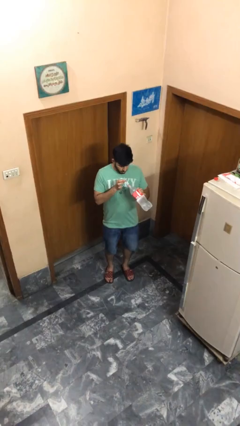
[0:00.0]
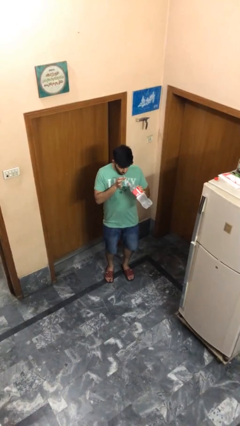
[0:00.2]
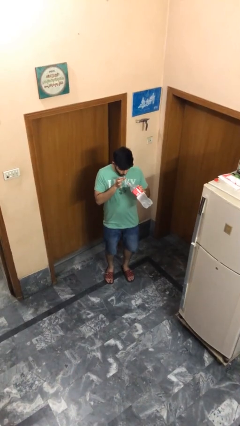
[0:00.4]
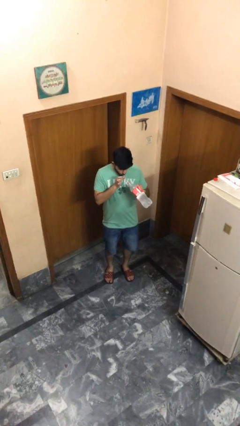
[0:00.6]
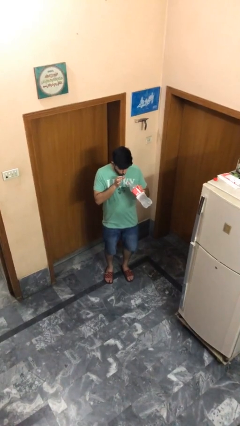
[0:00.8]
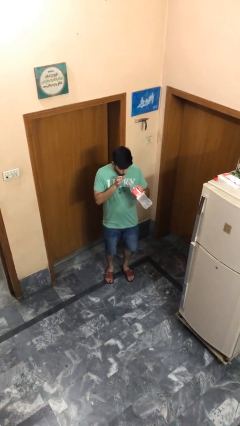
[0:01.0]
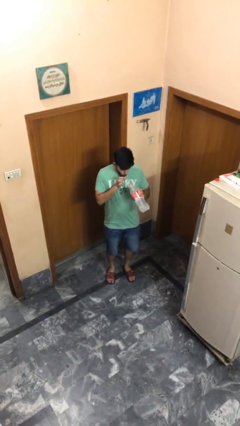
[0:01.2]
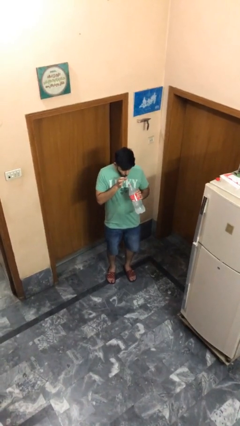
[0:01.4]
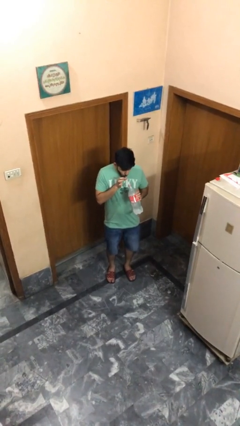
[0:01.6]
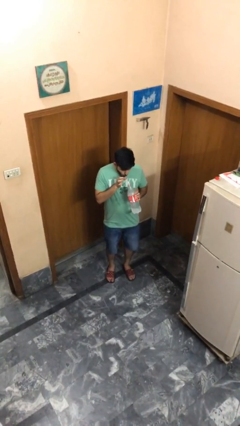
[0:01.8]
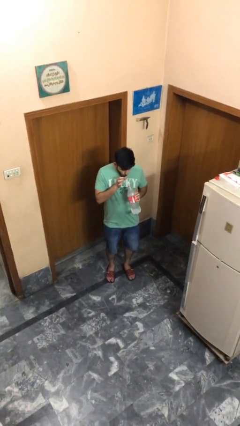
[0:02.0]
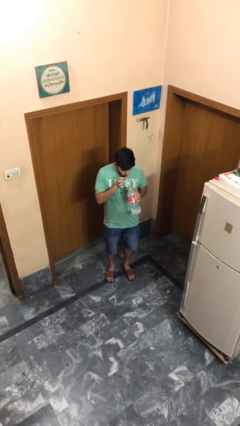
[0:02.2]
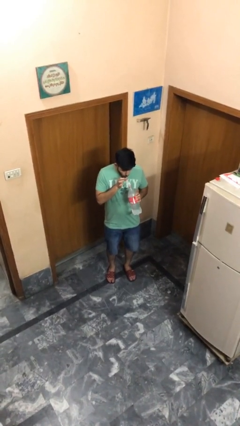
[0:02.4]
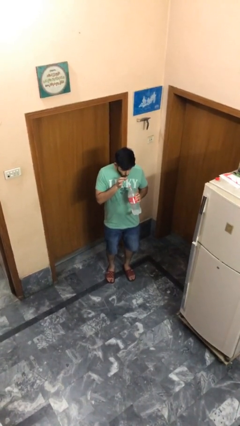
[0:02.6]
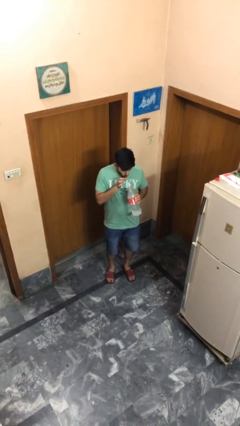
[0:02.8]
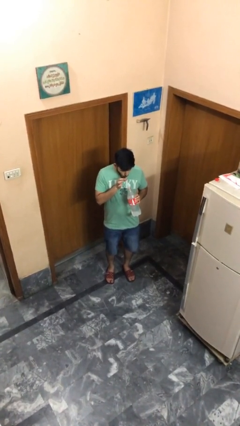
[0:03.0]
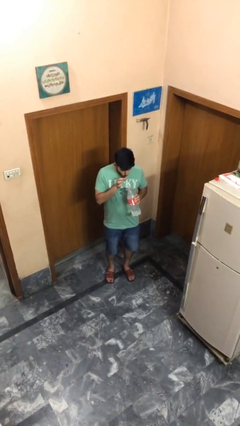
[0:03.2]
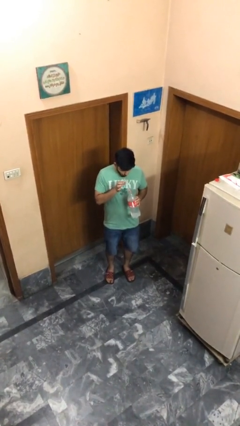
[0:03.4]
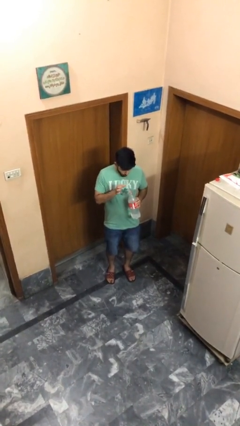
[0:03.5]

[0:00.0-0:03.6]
person drinks from straw

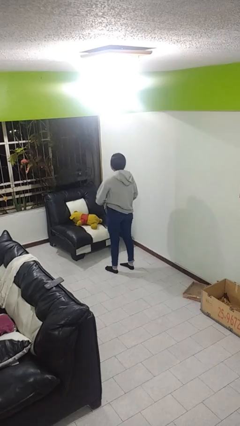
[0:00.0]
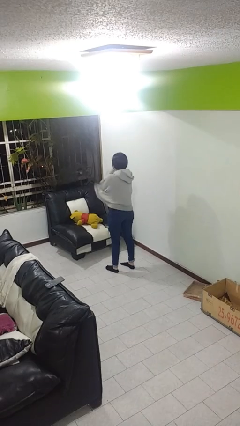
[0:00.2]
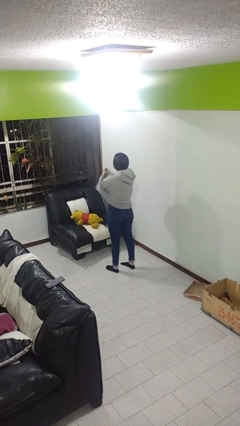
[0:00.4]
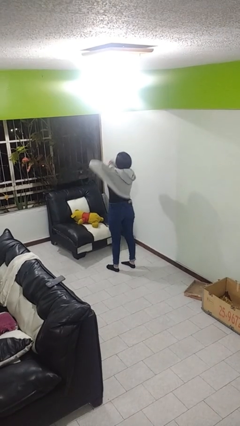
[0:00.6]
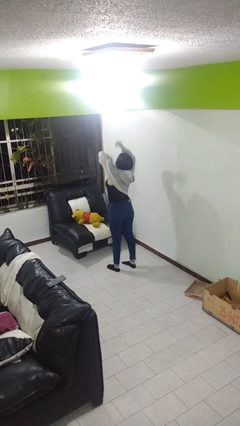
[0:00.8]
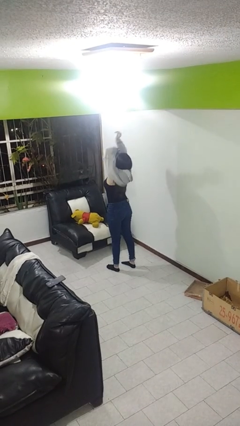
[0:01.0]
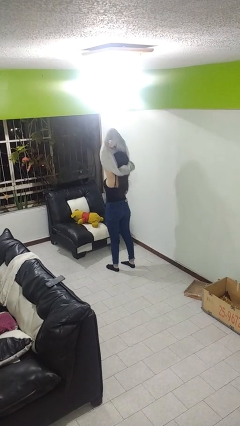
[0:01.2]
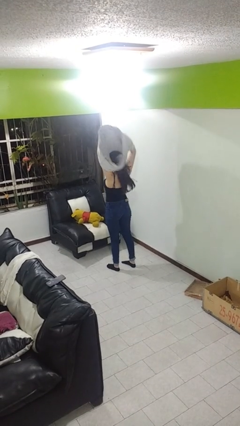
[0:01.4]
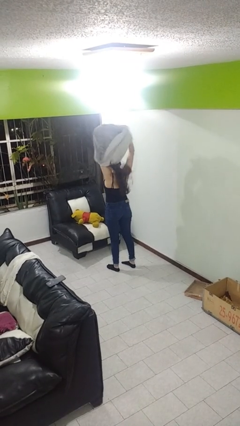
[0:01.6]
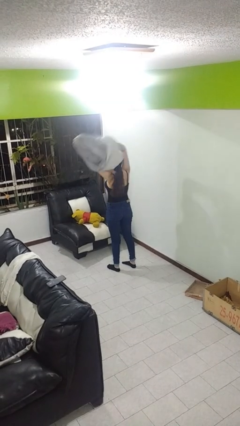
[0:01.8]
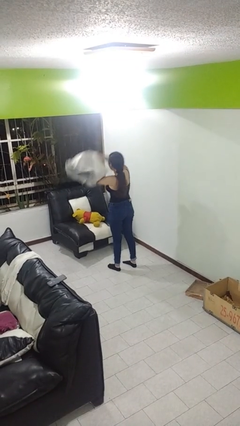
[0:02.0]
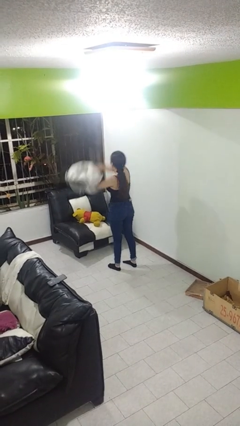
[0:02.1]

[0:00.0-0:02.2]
person takes off hoodie

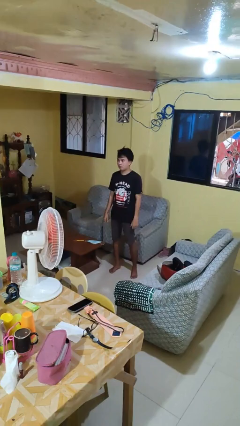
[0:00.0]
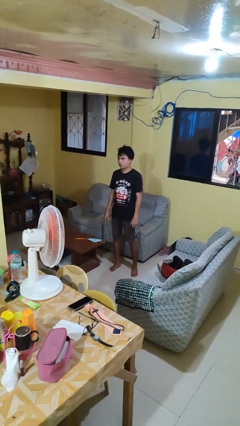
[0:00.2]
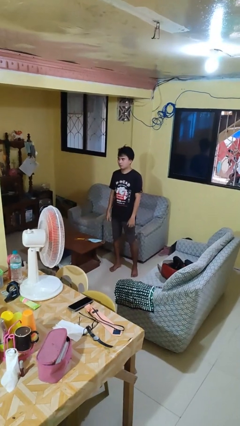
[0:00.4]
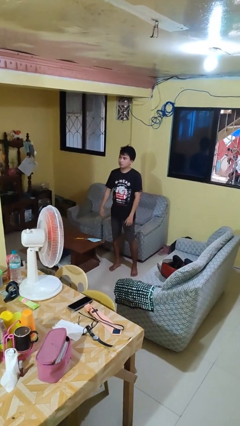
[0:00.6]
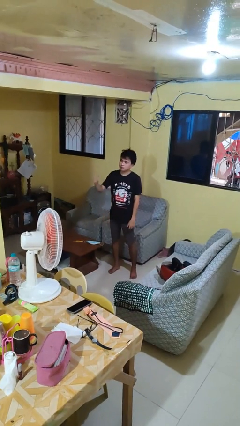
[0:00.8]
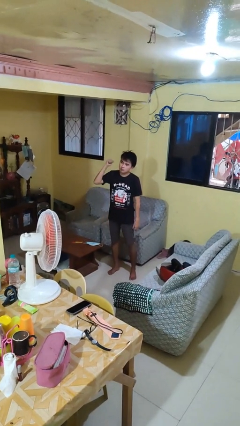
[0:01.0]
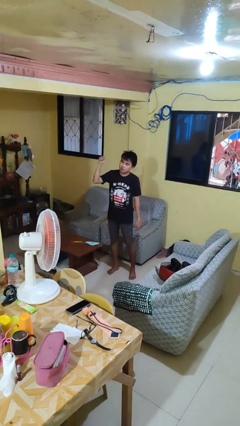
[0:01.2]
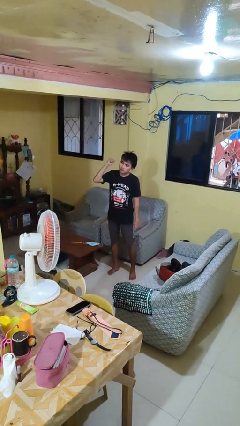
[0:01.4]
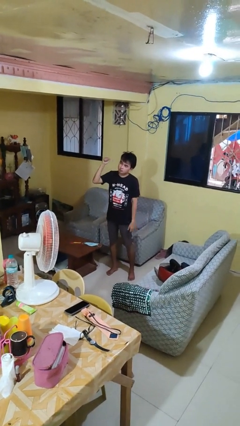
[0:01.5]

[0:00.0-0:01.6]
person gestures behind me

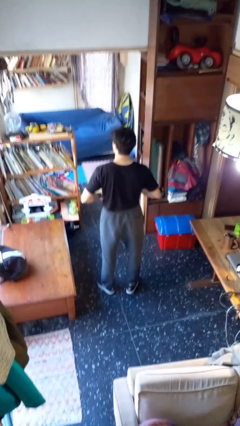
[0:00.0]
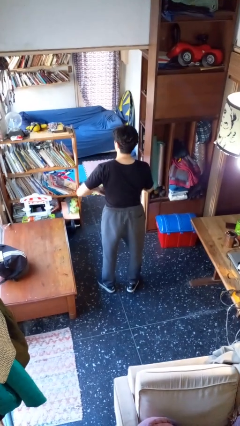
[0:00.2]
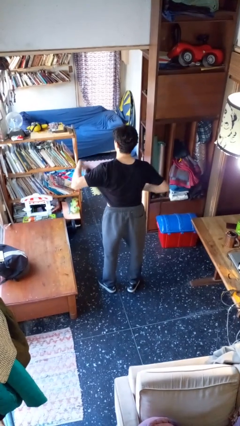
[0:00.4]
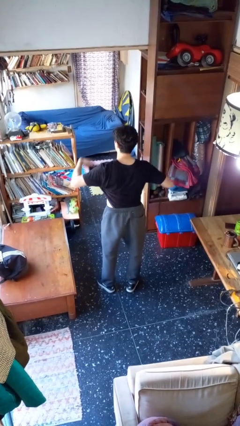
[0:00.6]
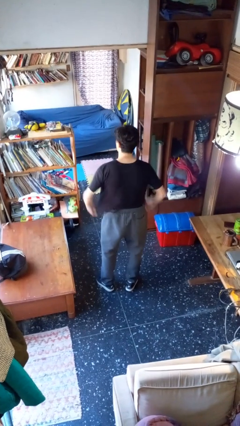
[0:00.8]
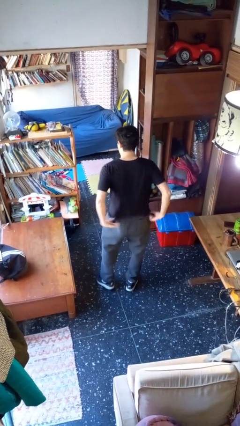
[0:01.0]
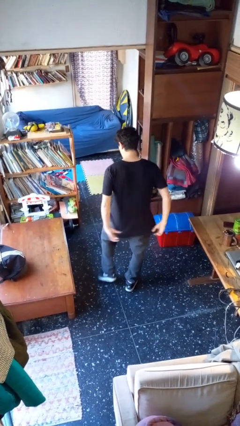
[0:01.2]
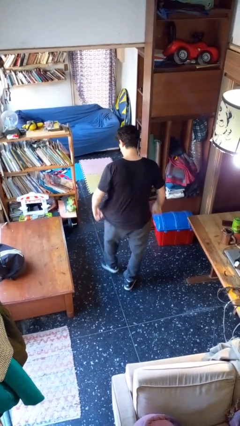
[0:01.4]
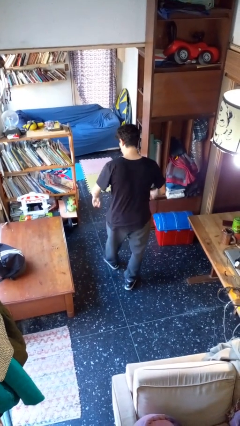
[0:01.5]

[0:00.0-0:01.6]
person untucks shirt

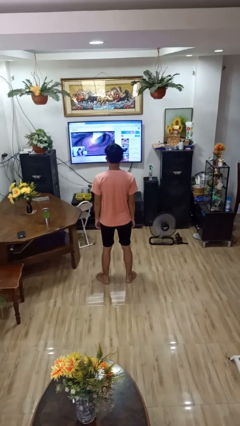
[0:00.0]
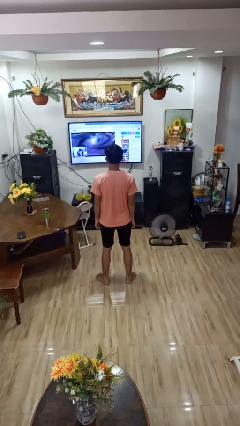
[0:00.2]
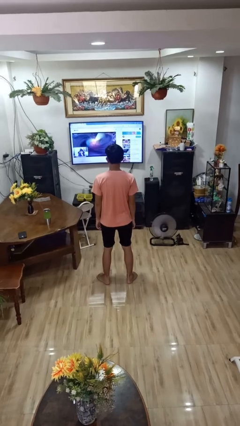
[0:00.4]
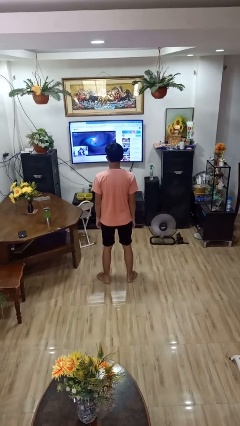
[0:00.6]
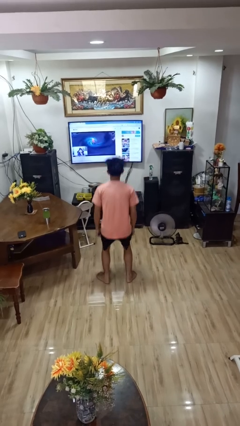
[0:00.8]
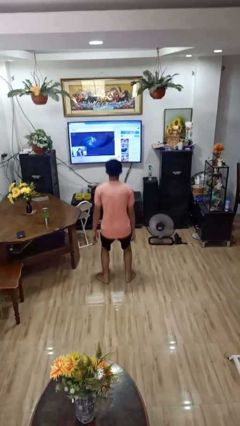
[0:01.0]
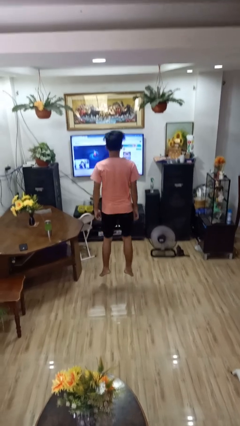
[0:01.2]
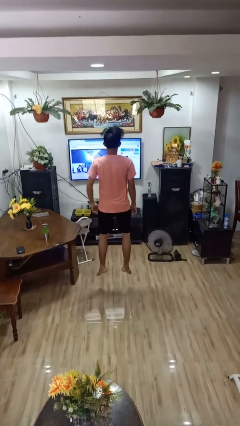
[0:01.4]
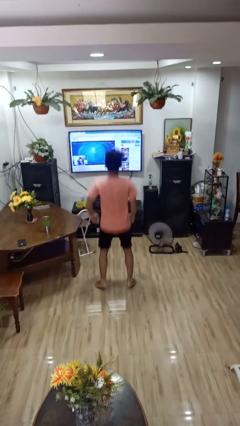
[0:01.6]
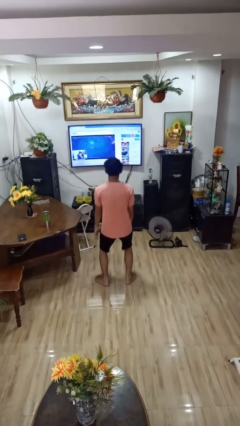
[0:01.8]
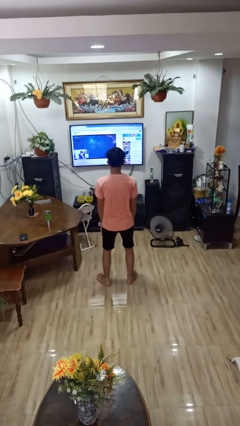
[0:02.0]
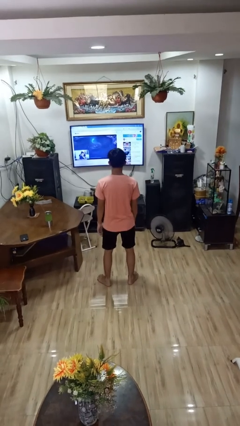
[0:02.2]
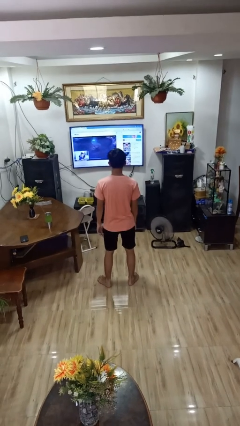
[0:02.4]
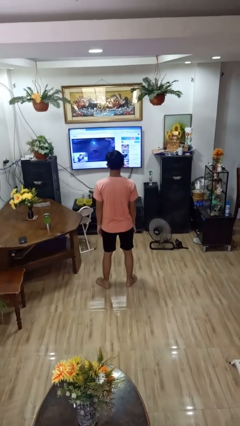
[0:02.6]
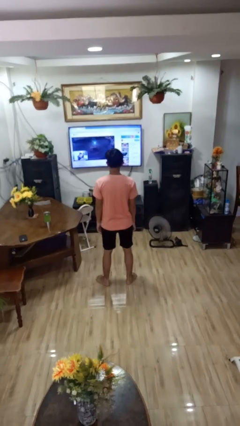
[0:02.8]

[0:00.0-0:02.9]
person jumps

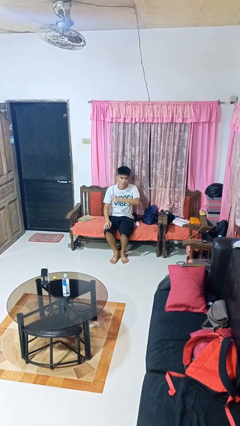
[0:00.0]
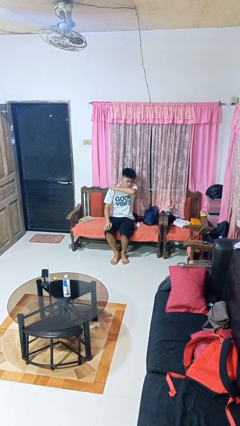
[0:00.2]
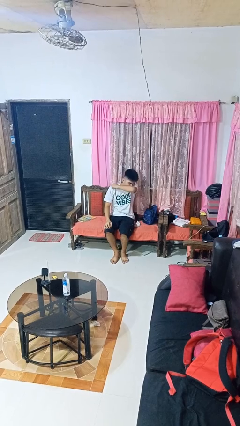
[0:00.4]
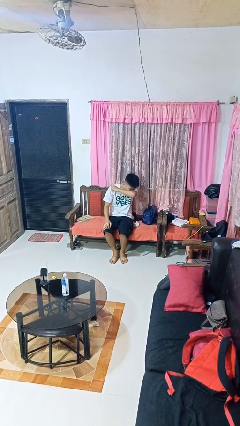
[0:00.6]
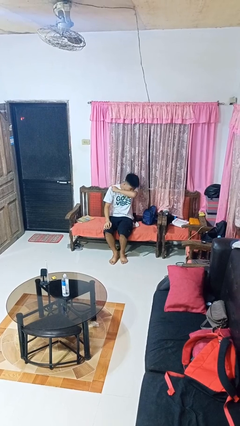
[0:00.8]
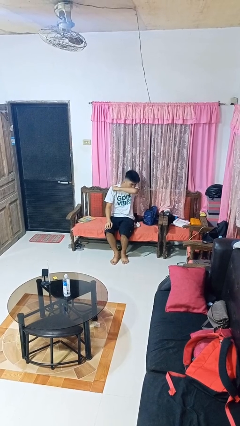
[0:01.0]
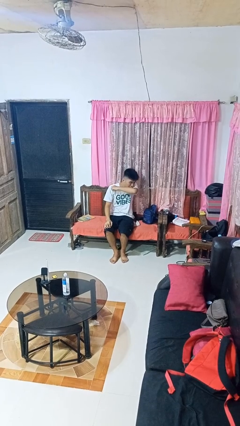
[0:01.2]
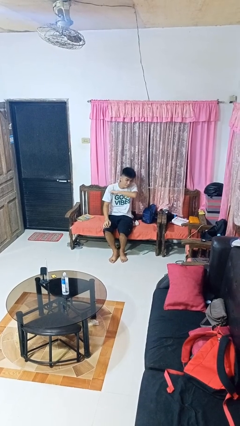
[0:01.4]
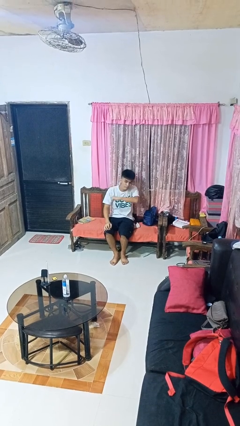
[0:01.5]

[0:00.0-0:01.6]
person sneezes into arm

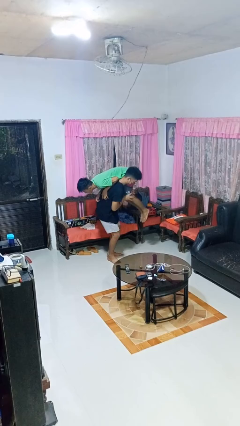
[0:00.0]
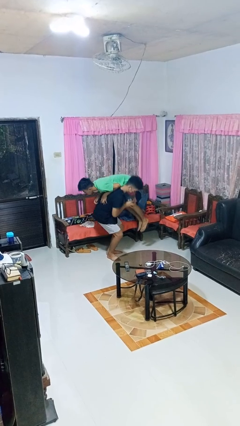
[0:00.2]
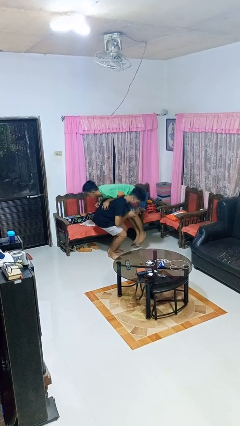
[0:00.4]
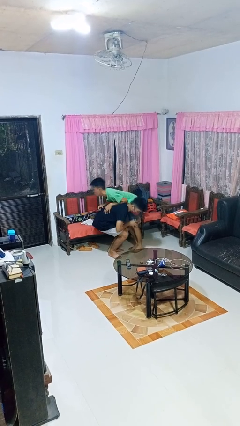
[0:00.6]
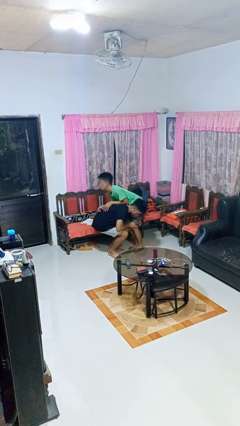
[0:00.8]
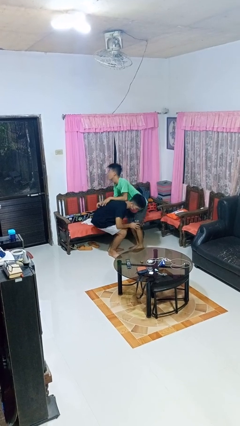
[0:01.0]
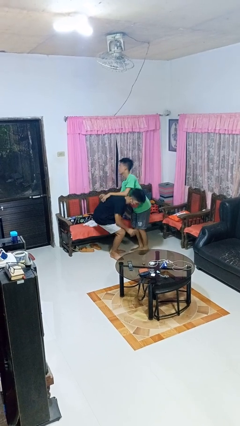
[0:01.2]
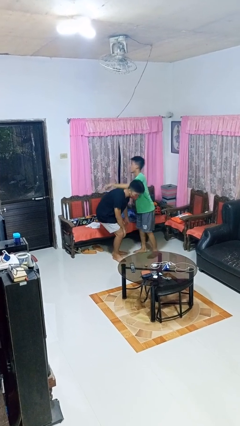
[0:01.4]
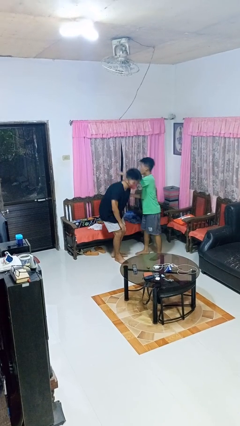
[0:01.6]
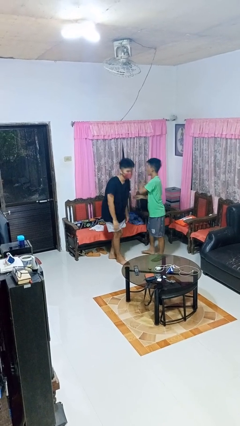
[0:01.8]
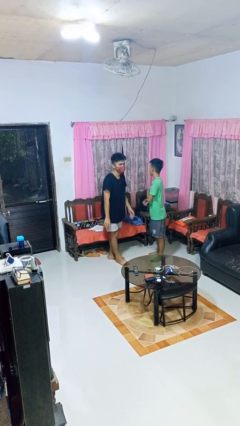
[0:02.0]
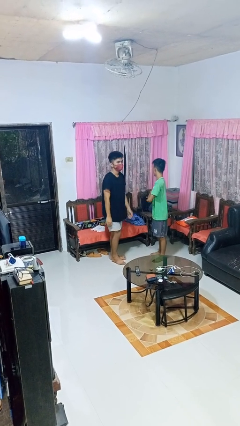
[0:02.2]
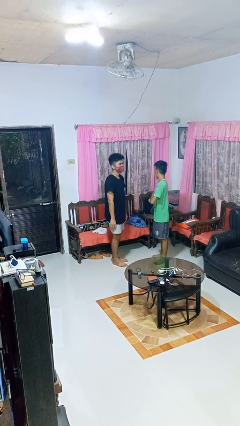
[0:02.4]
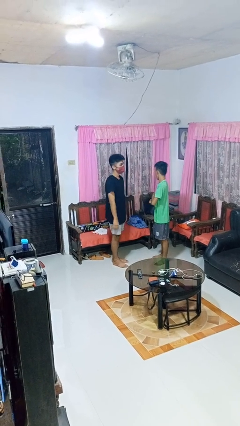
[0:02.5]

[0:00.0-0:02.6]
person puts down person

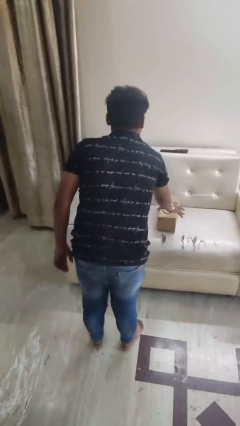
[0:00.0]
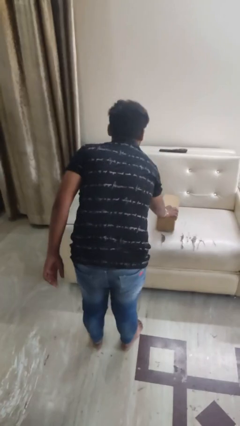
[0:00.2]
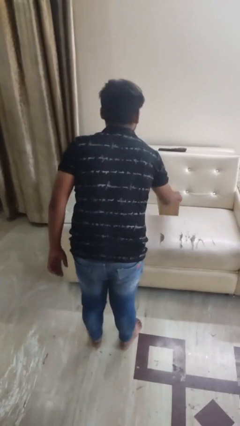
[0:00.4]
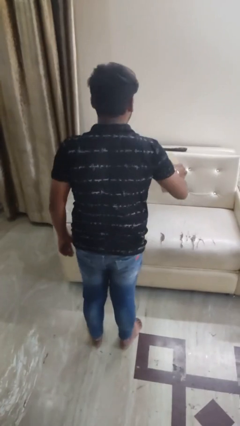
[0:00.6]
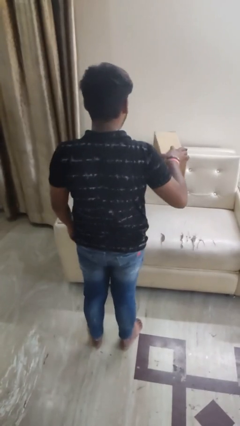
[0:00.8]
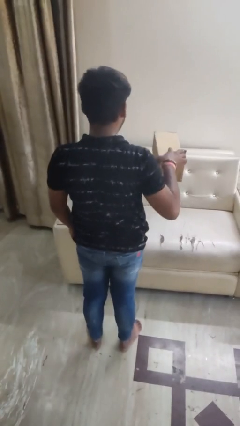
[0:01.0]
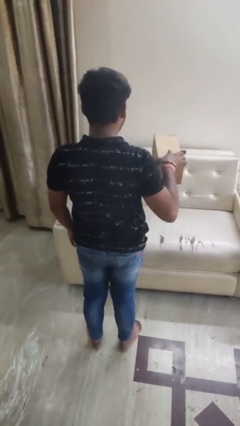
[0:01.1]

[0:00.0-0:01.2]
person picks up object from bed
